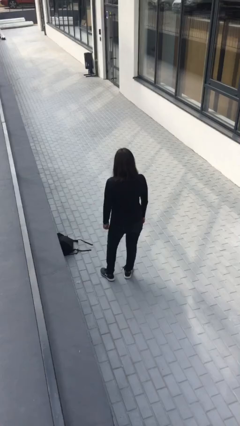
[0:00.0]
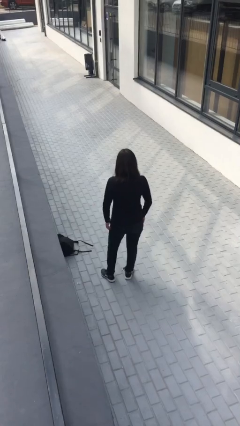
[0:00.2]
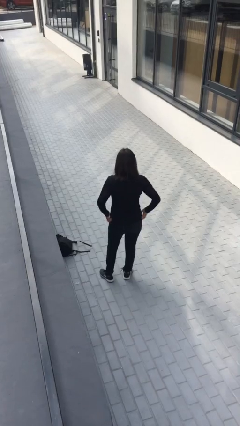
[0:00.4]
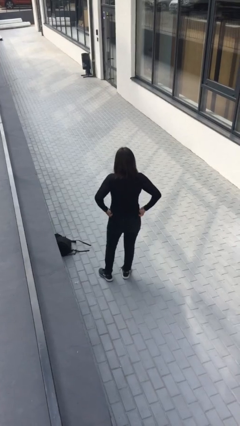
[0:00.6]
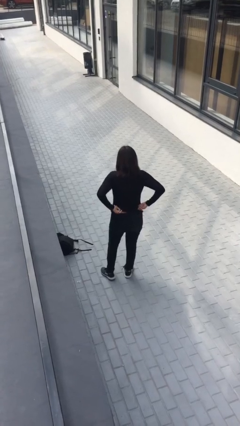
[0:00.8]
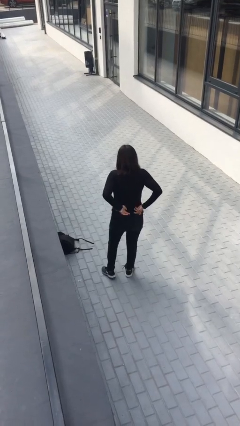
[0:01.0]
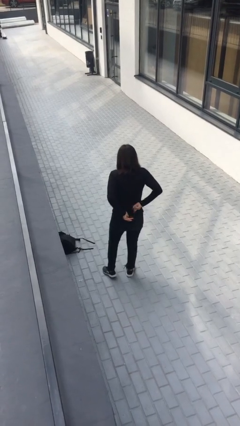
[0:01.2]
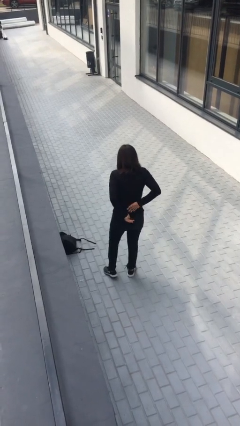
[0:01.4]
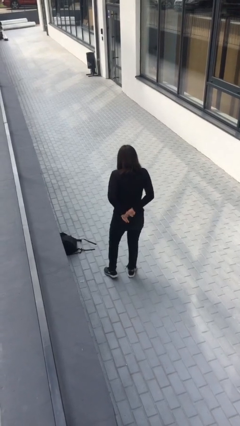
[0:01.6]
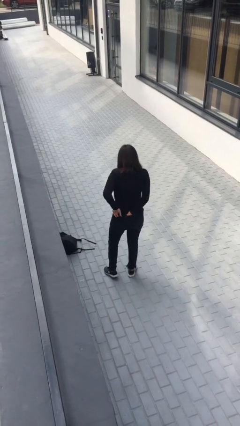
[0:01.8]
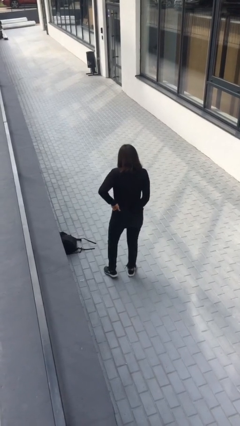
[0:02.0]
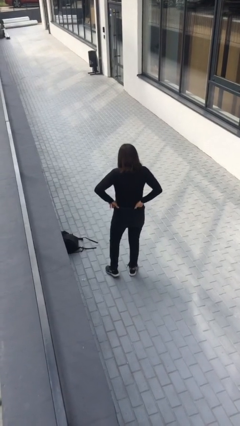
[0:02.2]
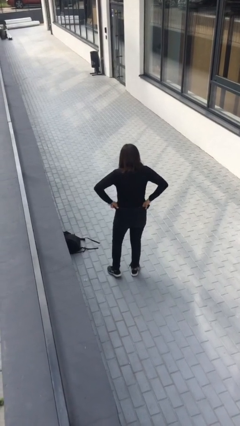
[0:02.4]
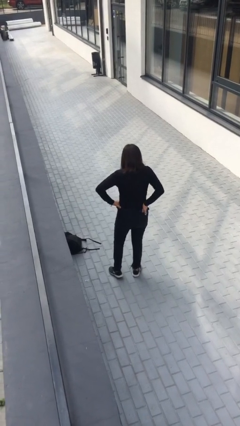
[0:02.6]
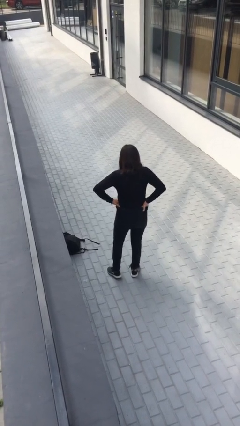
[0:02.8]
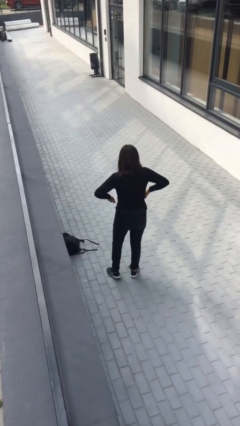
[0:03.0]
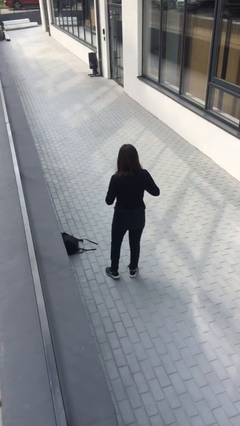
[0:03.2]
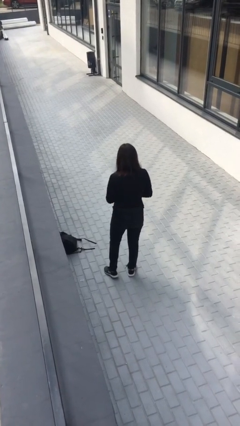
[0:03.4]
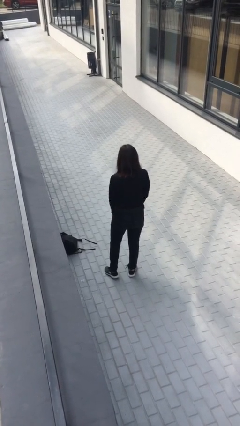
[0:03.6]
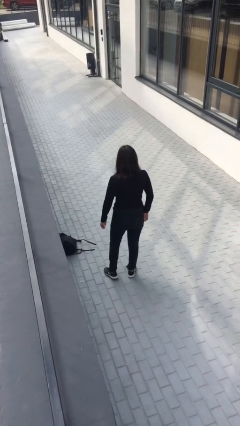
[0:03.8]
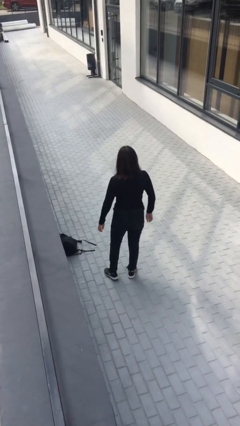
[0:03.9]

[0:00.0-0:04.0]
person tucks in shirt

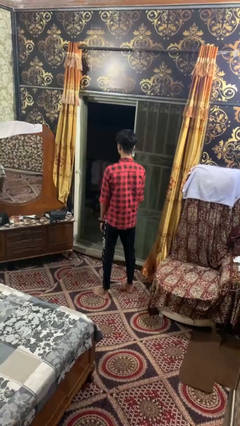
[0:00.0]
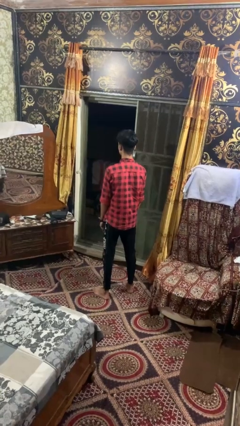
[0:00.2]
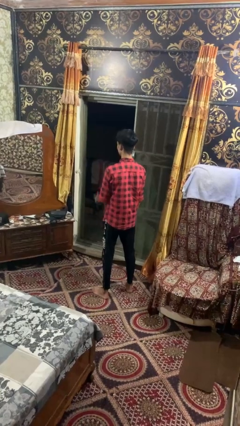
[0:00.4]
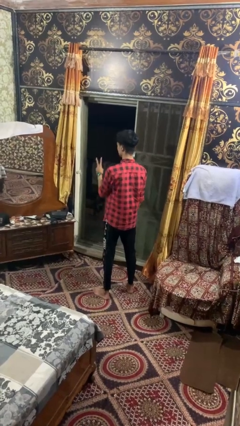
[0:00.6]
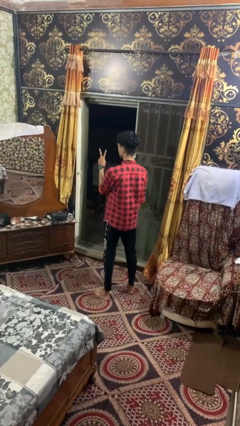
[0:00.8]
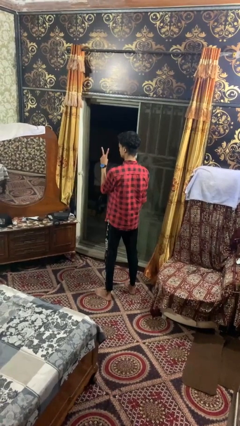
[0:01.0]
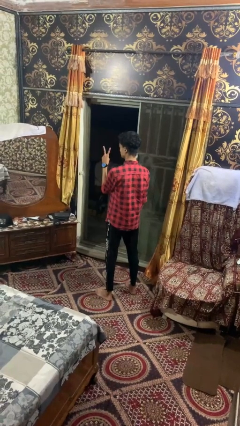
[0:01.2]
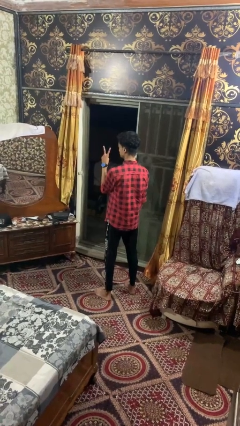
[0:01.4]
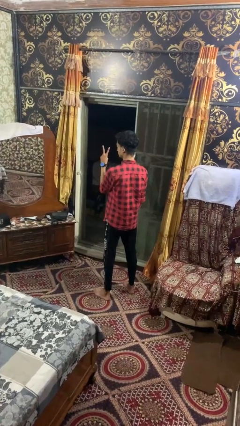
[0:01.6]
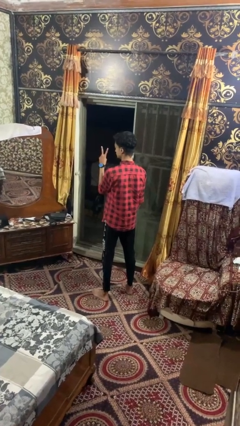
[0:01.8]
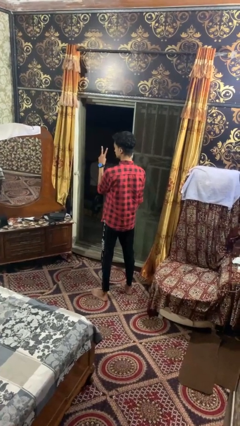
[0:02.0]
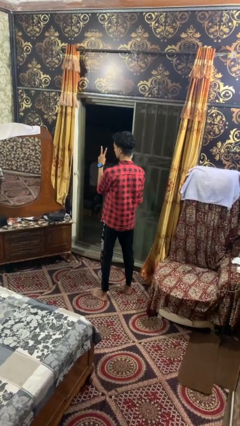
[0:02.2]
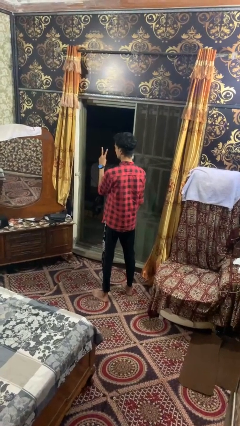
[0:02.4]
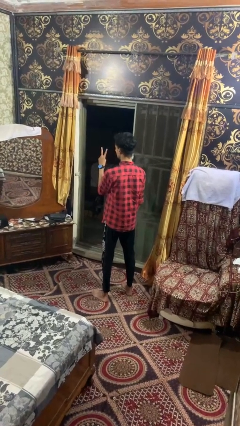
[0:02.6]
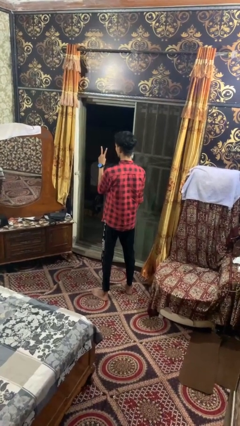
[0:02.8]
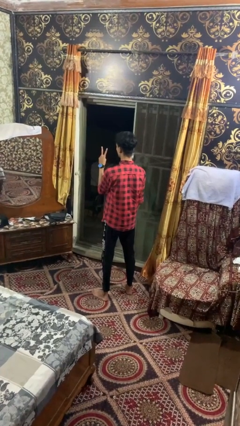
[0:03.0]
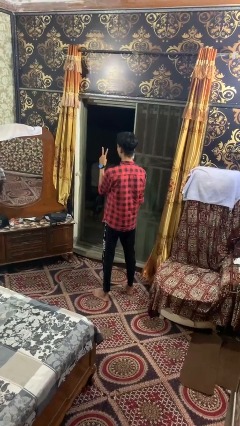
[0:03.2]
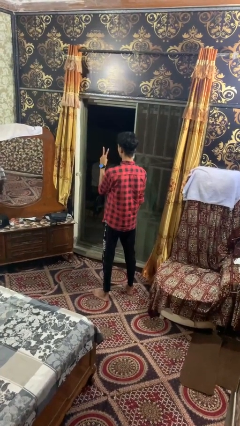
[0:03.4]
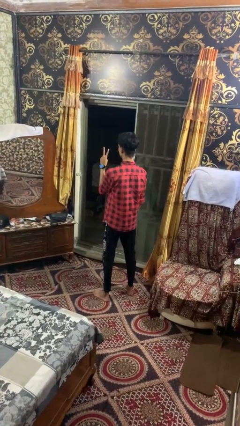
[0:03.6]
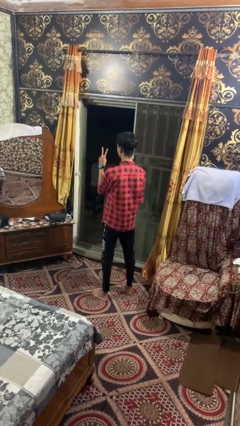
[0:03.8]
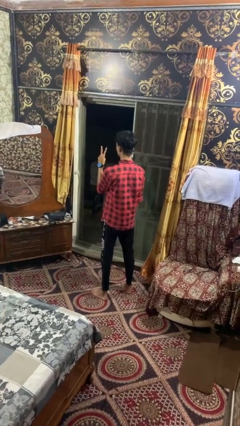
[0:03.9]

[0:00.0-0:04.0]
person gestures peace

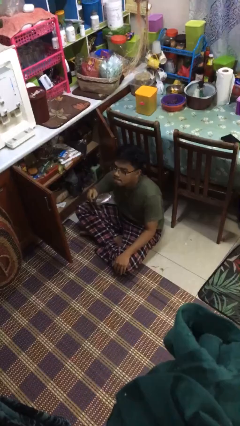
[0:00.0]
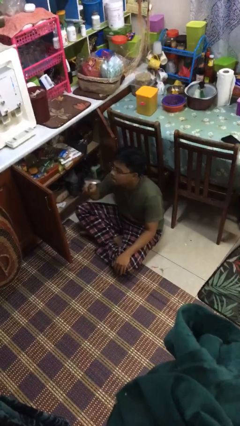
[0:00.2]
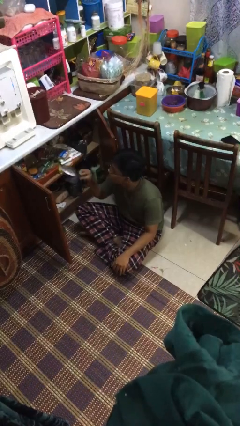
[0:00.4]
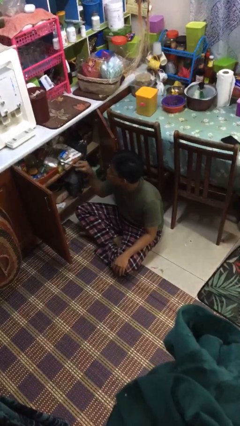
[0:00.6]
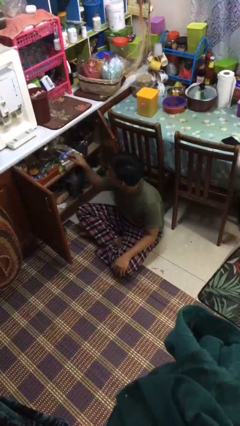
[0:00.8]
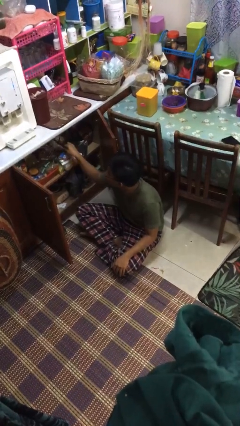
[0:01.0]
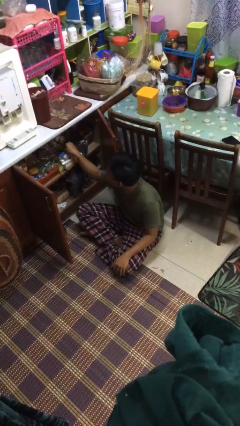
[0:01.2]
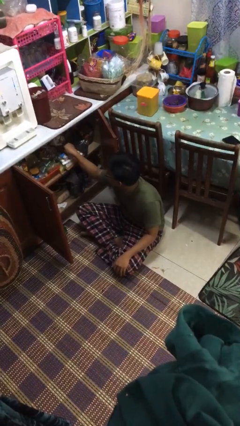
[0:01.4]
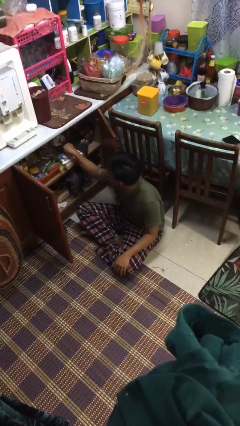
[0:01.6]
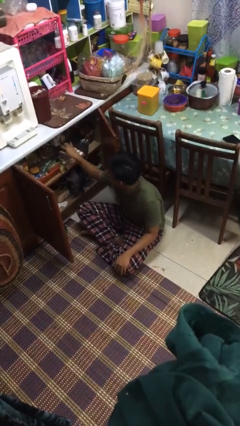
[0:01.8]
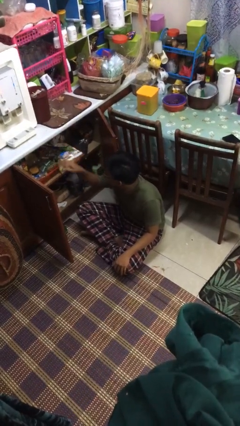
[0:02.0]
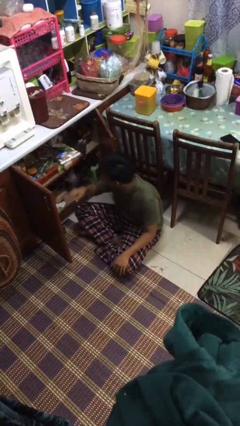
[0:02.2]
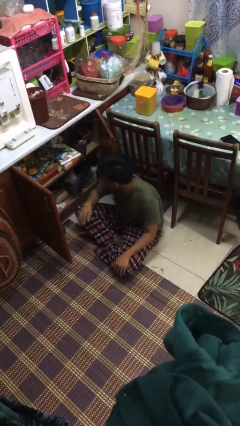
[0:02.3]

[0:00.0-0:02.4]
person puts object into kitchen drawer

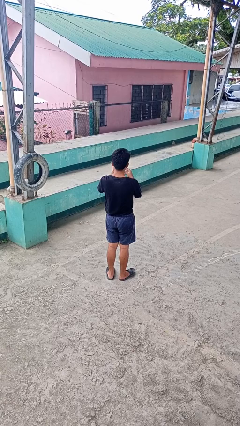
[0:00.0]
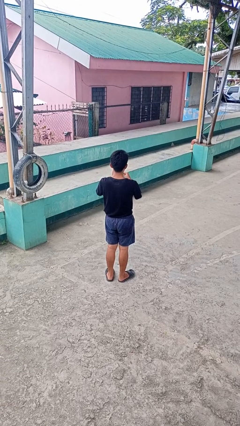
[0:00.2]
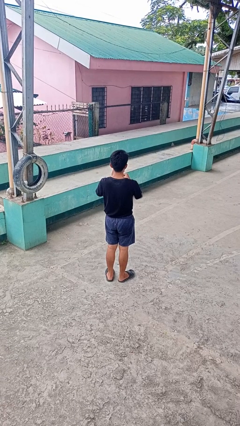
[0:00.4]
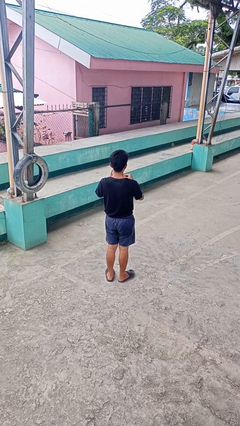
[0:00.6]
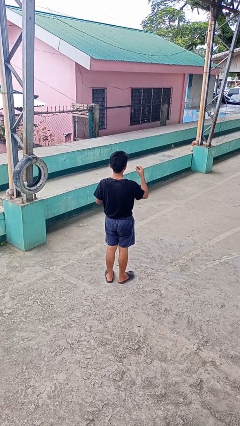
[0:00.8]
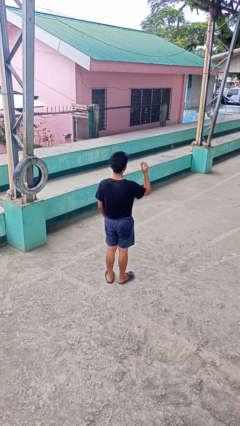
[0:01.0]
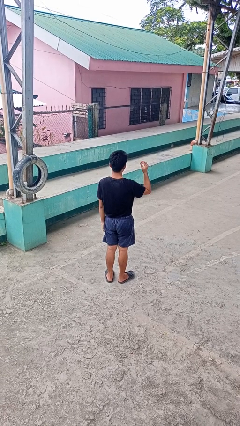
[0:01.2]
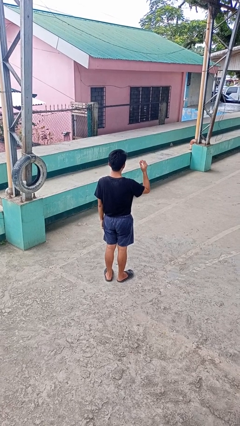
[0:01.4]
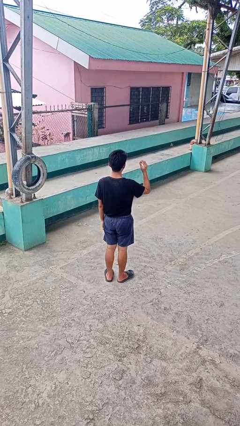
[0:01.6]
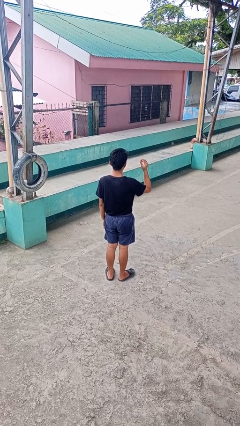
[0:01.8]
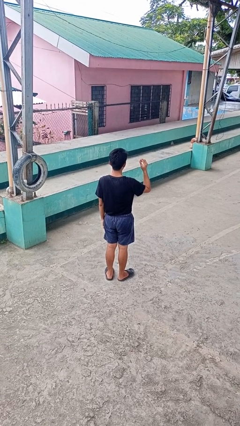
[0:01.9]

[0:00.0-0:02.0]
person takes off ring

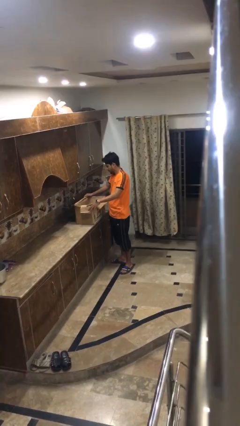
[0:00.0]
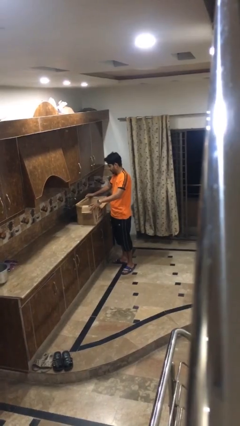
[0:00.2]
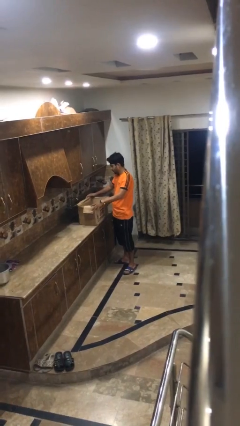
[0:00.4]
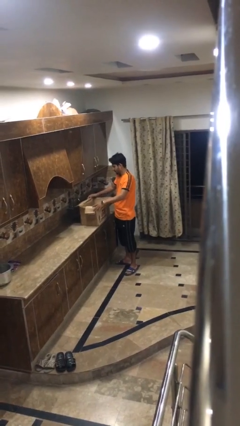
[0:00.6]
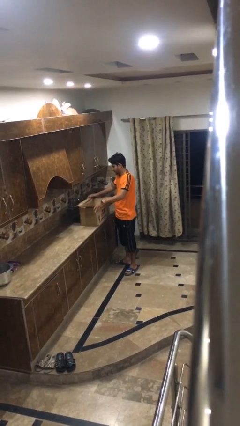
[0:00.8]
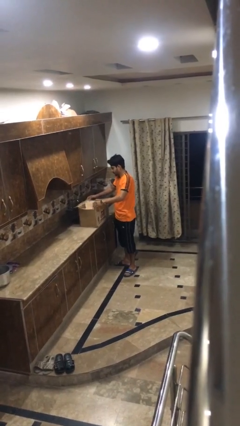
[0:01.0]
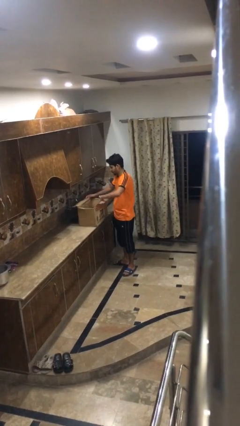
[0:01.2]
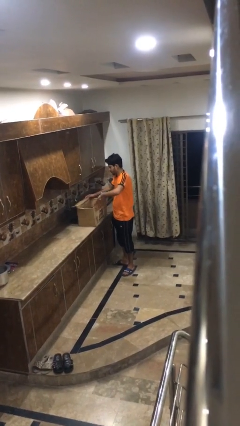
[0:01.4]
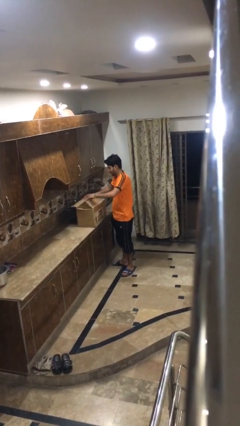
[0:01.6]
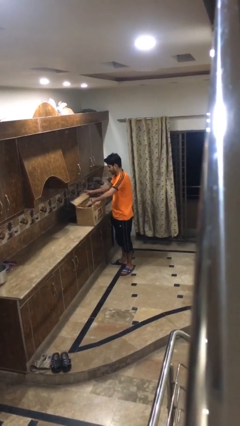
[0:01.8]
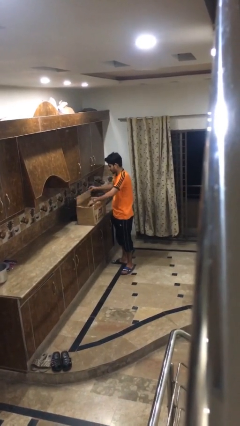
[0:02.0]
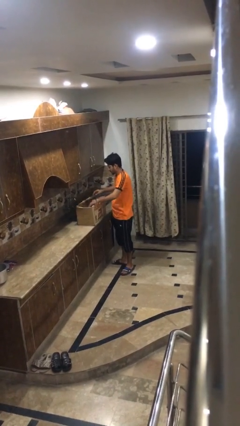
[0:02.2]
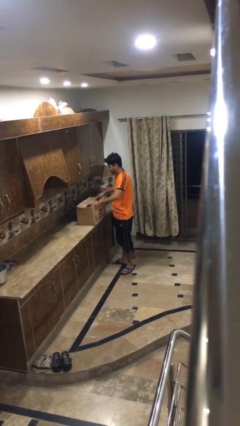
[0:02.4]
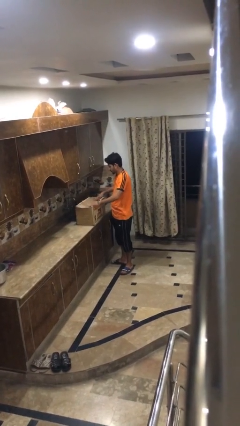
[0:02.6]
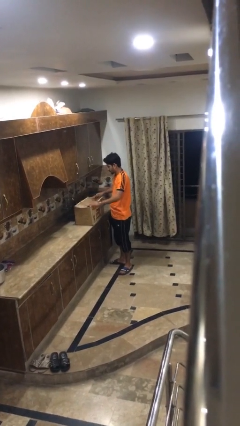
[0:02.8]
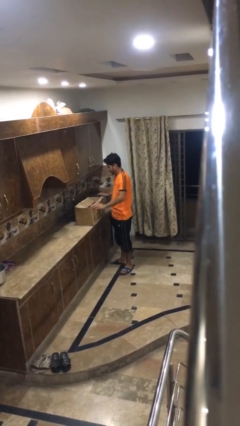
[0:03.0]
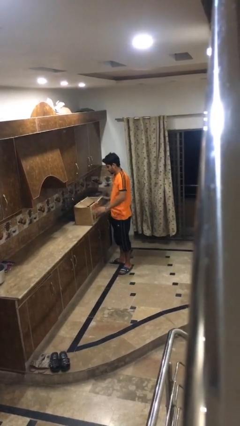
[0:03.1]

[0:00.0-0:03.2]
person closes box

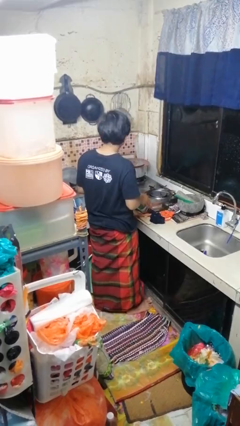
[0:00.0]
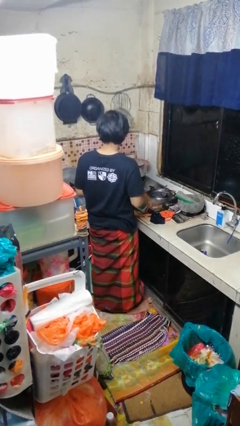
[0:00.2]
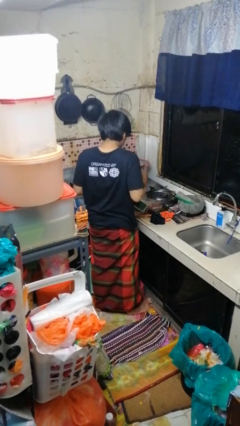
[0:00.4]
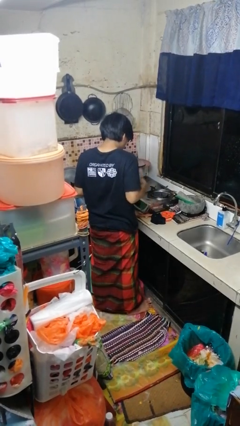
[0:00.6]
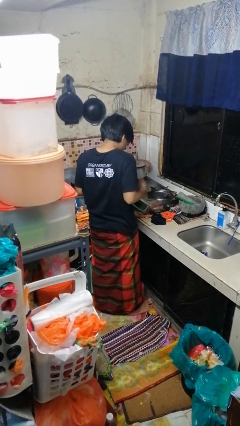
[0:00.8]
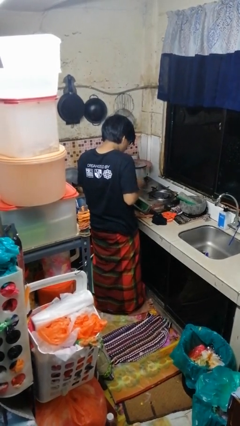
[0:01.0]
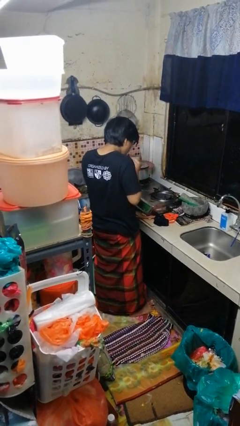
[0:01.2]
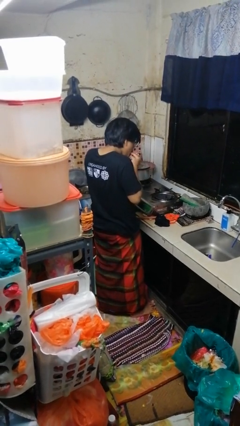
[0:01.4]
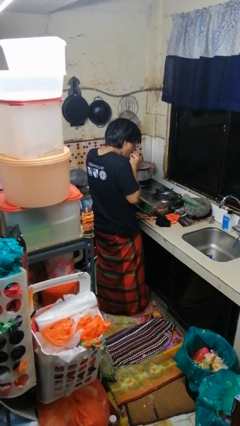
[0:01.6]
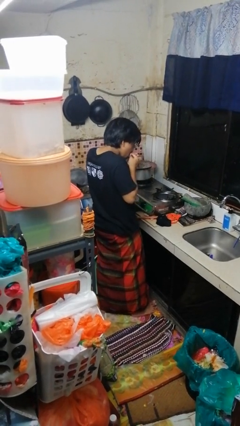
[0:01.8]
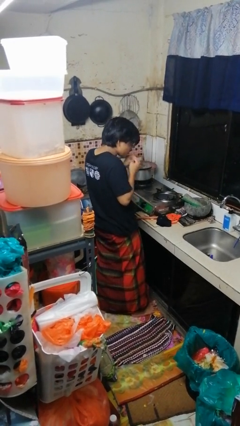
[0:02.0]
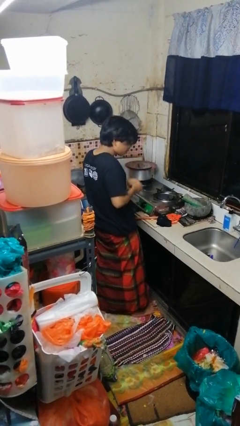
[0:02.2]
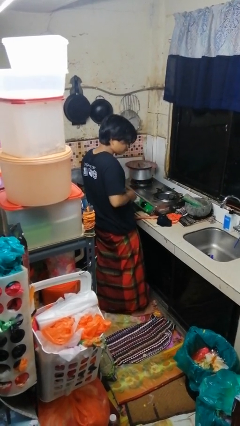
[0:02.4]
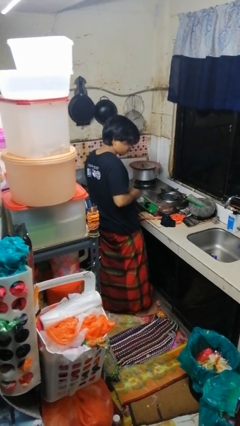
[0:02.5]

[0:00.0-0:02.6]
person burns hand
